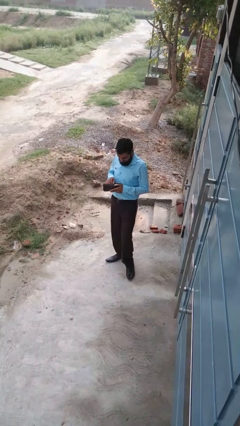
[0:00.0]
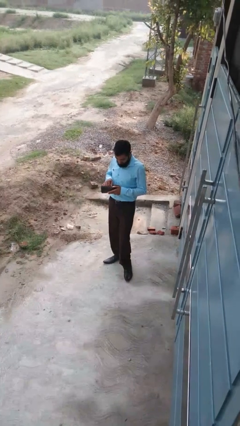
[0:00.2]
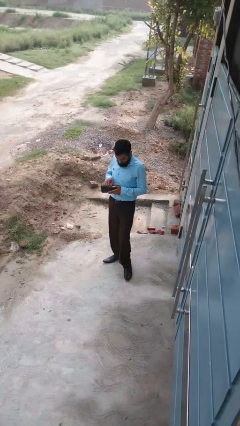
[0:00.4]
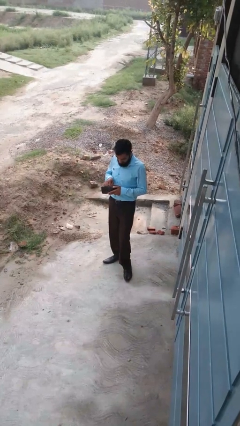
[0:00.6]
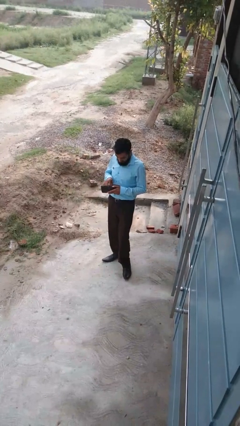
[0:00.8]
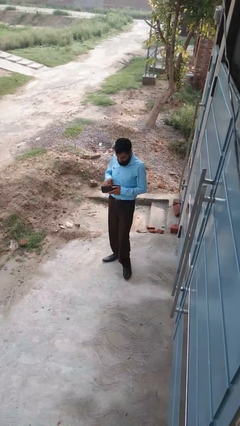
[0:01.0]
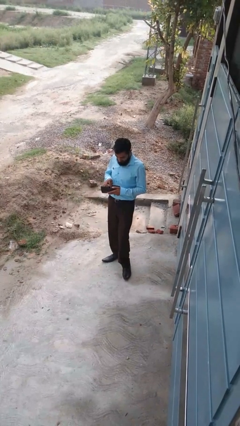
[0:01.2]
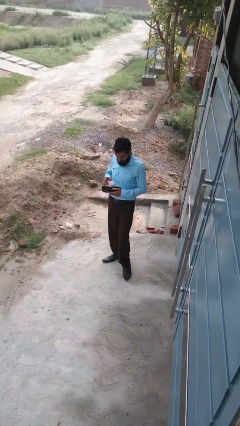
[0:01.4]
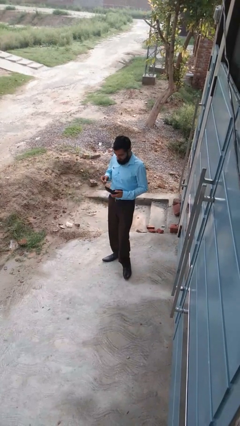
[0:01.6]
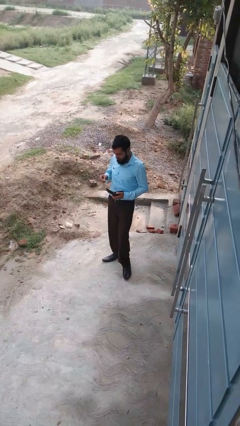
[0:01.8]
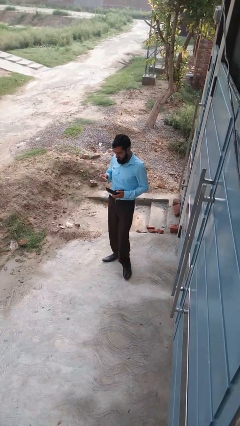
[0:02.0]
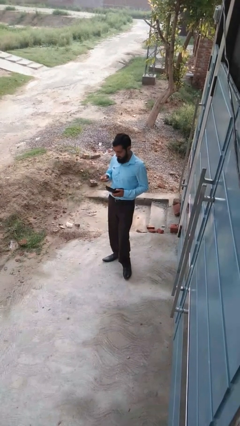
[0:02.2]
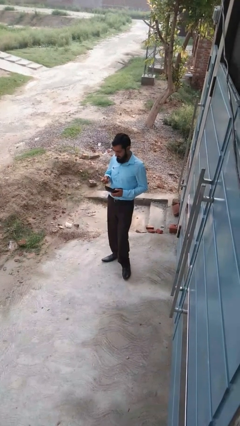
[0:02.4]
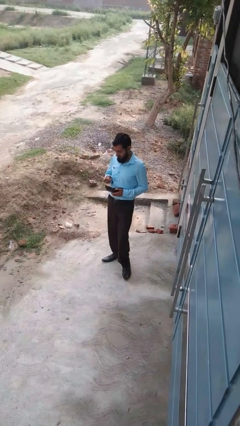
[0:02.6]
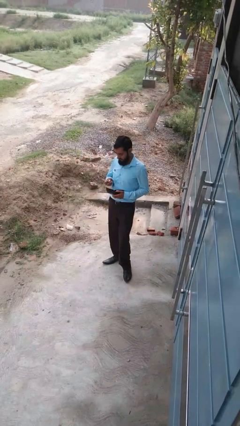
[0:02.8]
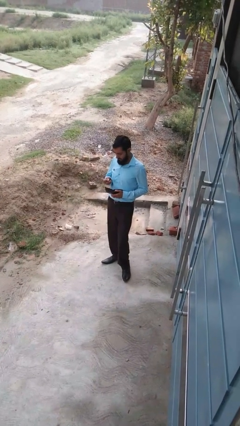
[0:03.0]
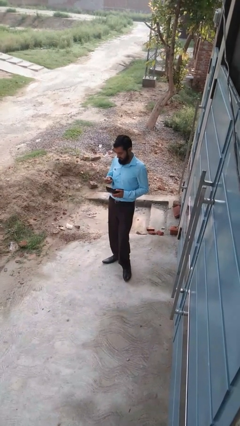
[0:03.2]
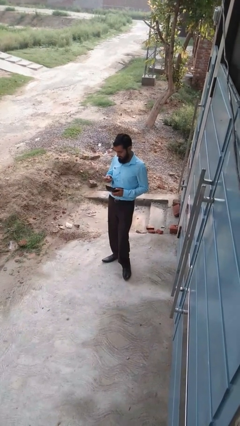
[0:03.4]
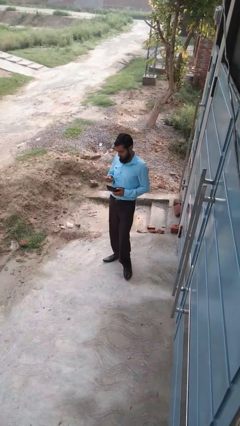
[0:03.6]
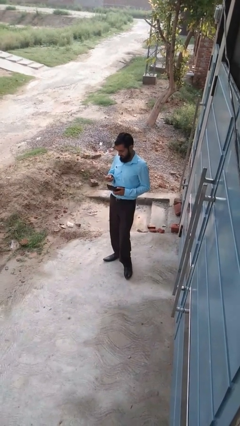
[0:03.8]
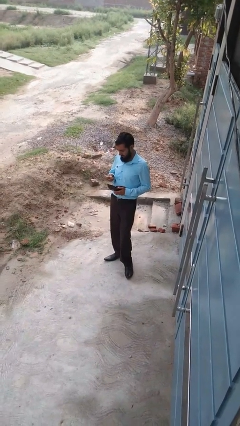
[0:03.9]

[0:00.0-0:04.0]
person takes object from purse

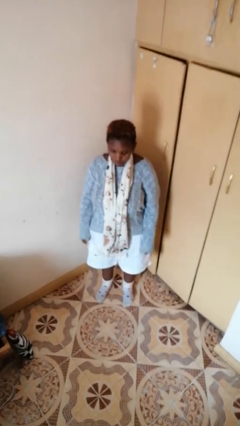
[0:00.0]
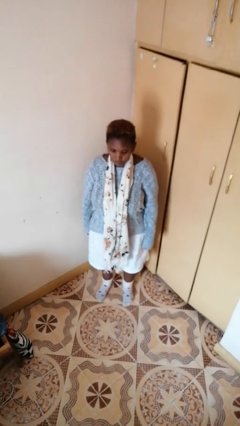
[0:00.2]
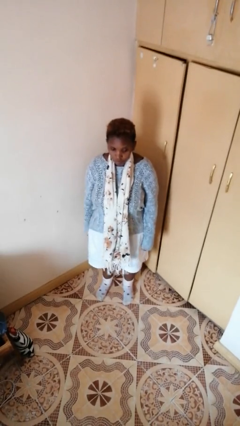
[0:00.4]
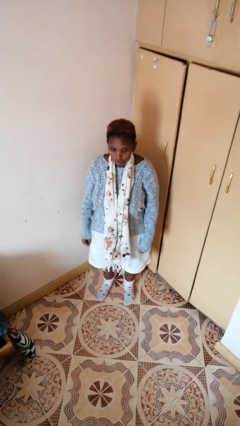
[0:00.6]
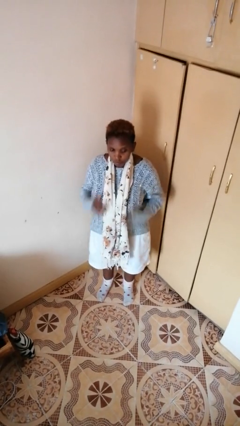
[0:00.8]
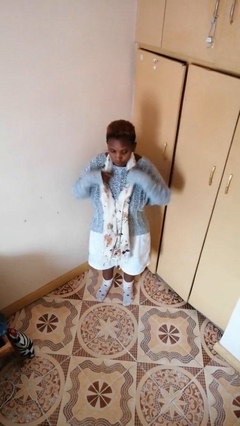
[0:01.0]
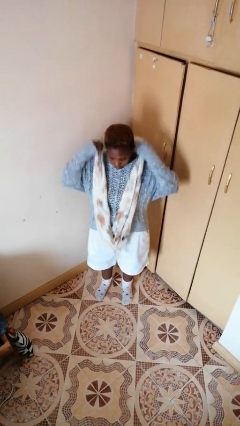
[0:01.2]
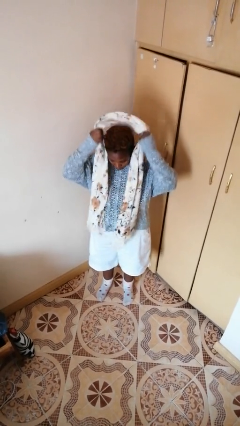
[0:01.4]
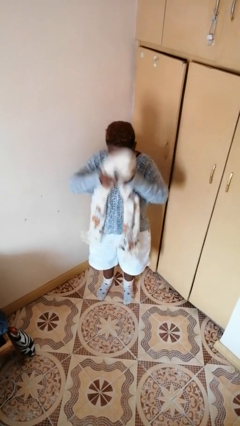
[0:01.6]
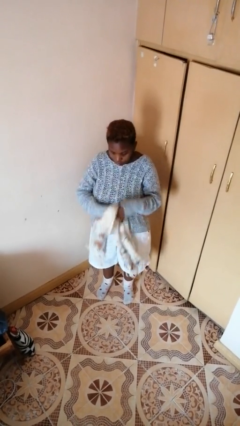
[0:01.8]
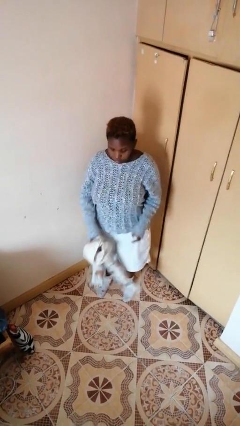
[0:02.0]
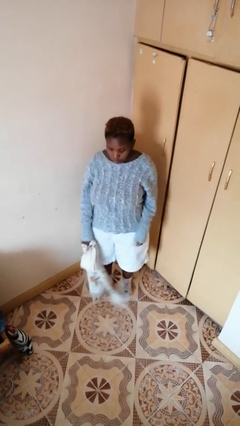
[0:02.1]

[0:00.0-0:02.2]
person takes off scarf

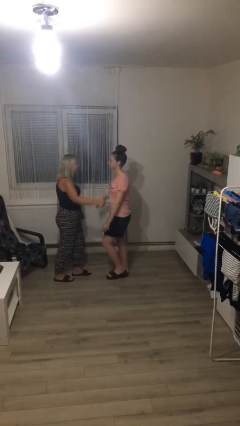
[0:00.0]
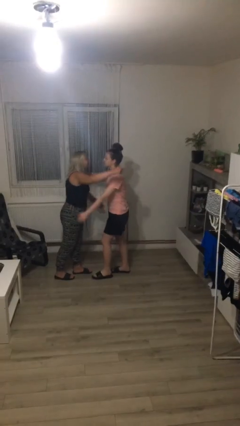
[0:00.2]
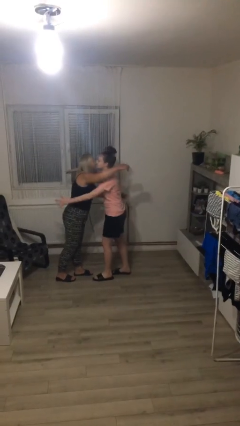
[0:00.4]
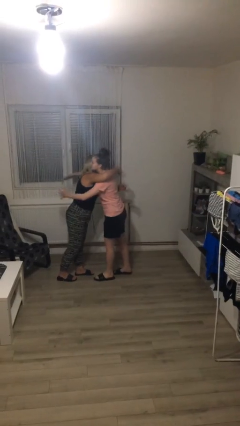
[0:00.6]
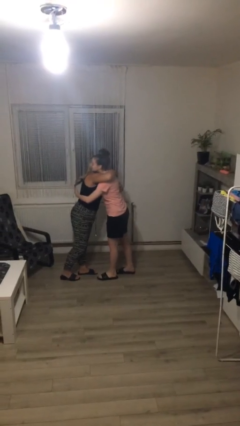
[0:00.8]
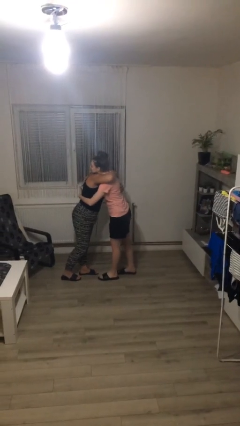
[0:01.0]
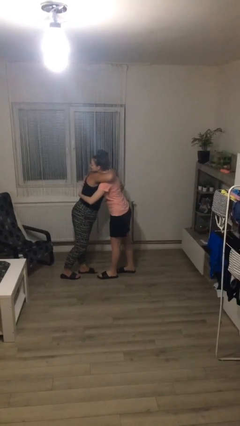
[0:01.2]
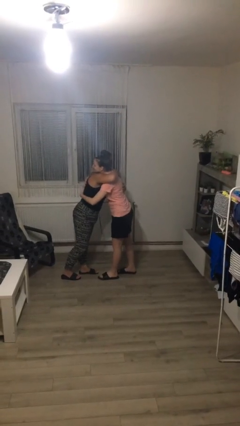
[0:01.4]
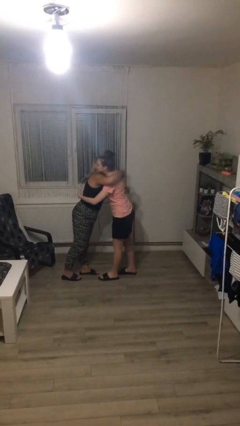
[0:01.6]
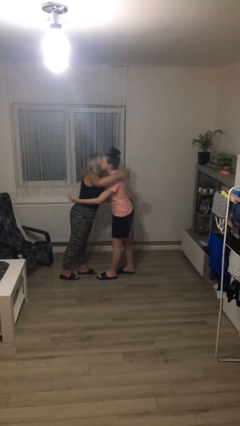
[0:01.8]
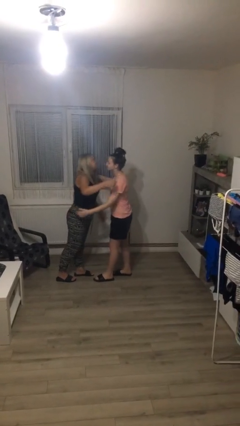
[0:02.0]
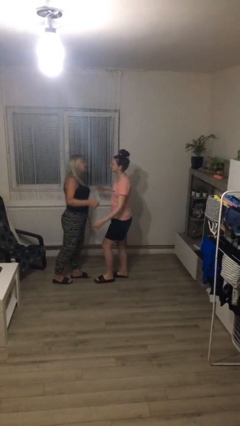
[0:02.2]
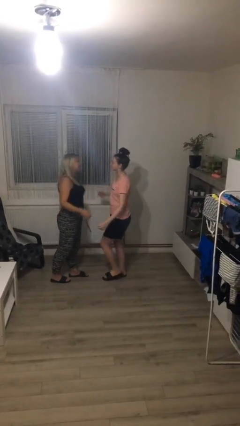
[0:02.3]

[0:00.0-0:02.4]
person embraces person

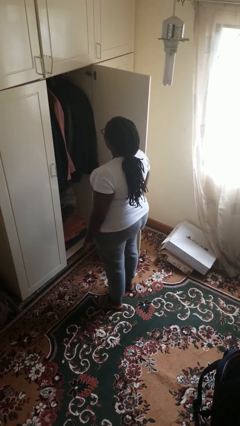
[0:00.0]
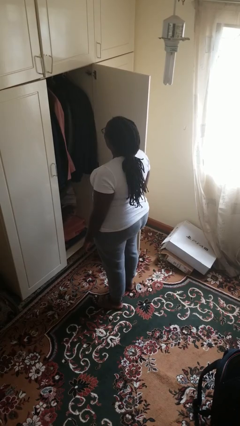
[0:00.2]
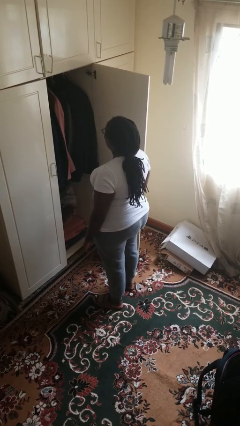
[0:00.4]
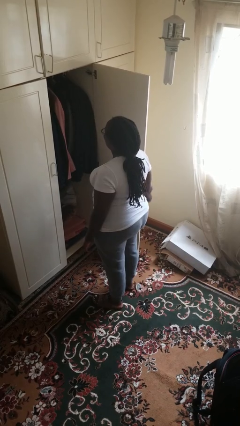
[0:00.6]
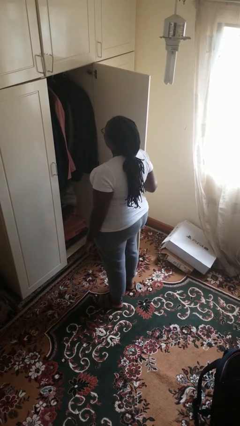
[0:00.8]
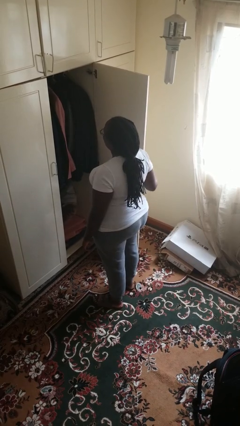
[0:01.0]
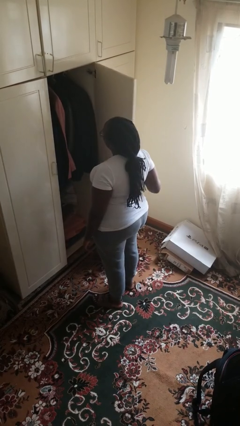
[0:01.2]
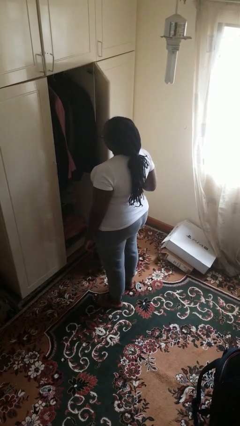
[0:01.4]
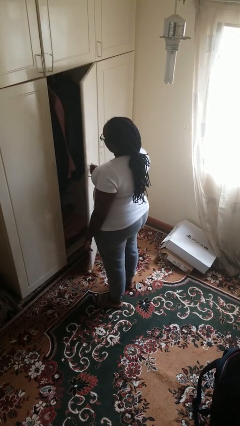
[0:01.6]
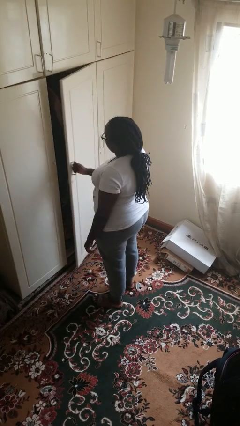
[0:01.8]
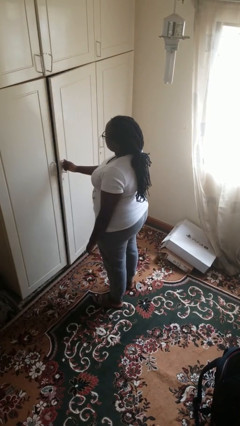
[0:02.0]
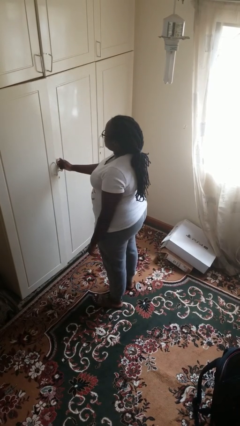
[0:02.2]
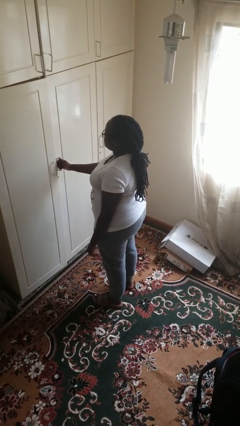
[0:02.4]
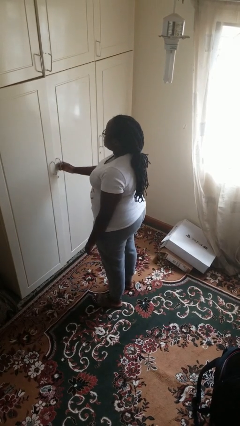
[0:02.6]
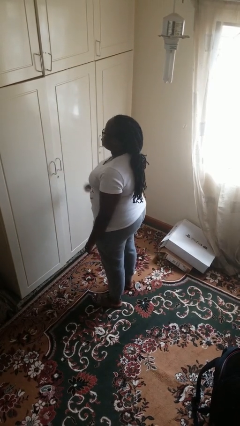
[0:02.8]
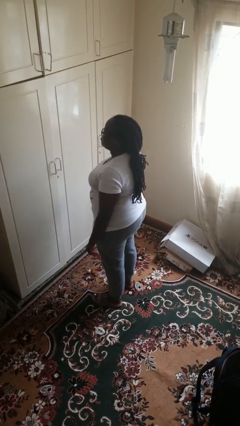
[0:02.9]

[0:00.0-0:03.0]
person closes closet door

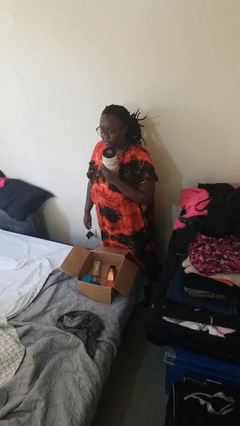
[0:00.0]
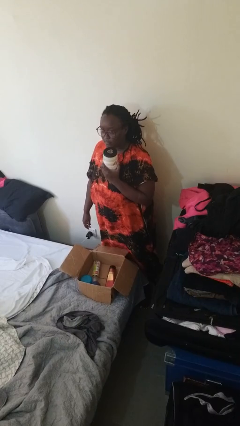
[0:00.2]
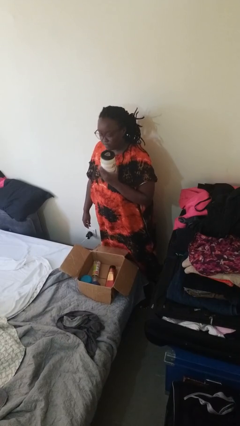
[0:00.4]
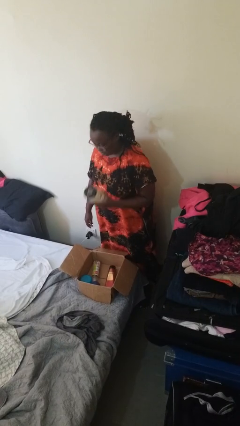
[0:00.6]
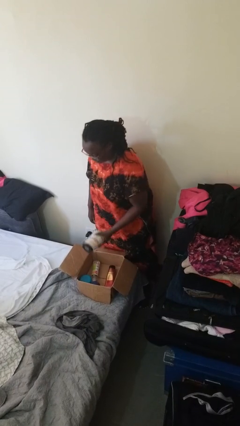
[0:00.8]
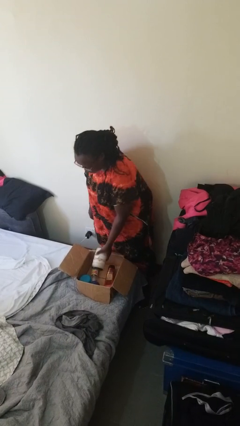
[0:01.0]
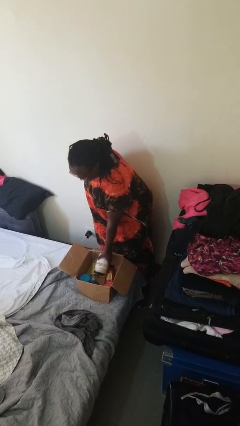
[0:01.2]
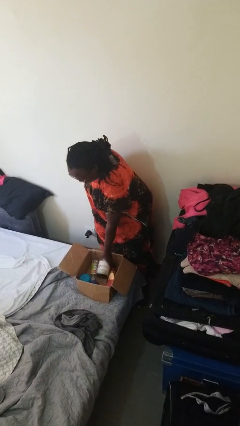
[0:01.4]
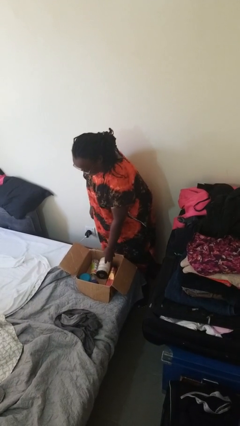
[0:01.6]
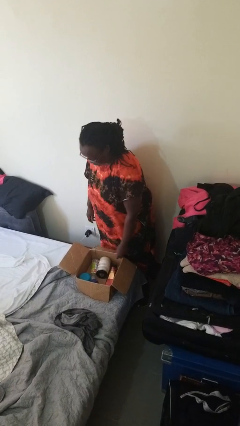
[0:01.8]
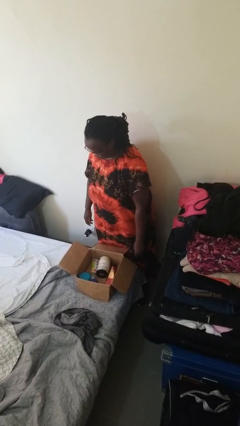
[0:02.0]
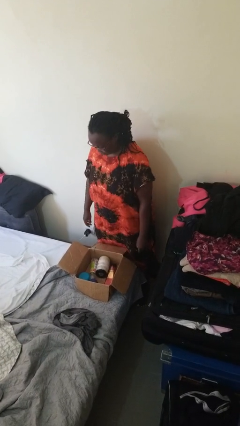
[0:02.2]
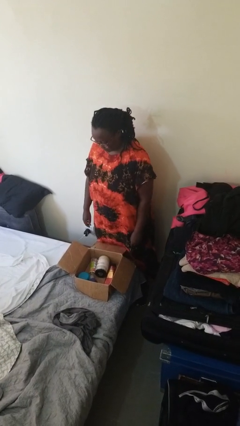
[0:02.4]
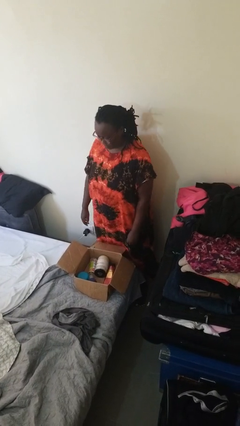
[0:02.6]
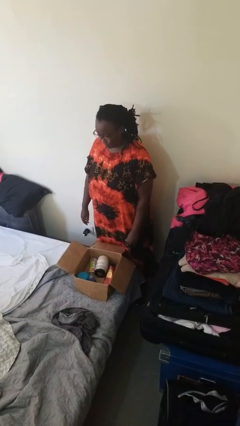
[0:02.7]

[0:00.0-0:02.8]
person puts object into box

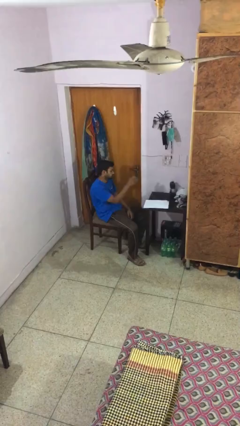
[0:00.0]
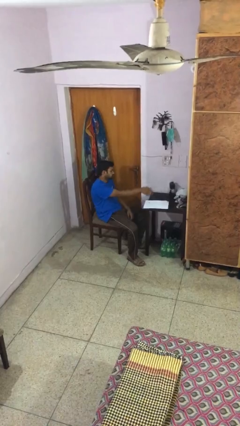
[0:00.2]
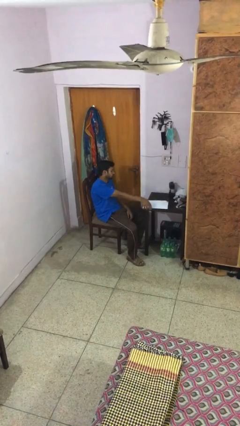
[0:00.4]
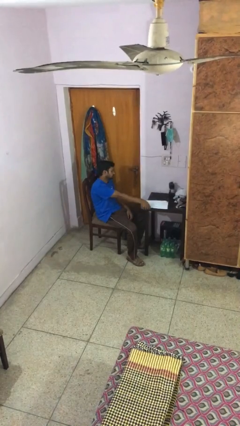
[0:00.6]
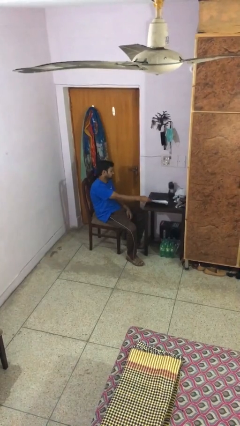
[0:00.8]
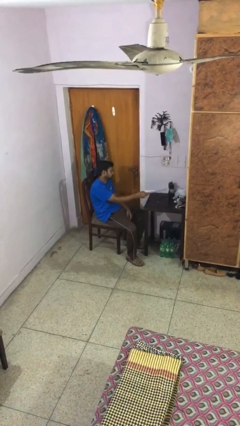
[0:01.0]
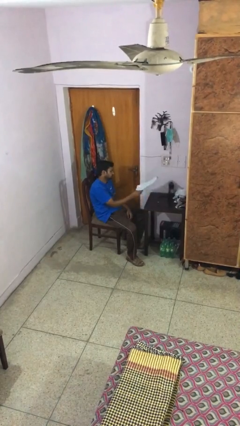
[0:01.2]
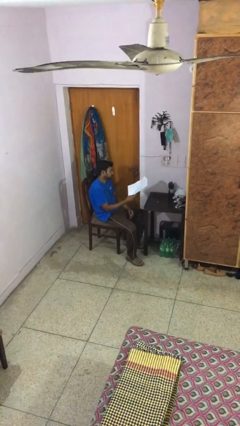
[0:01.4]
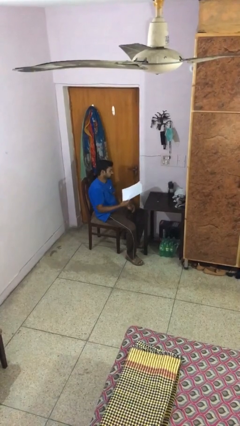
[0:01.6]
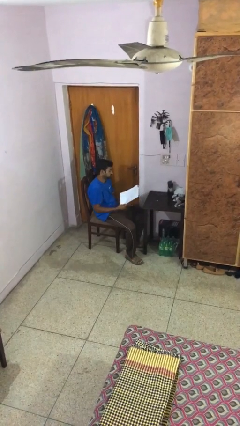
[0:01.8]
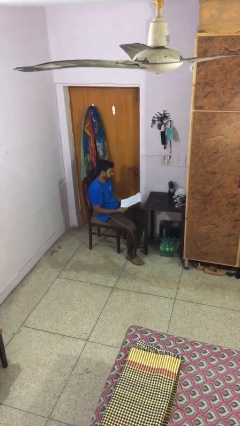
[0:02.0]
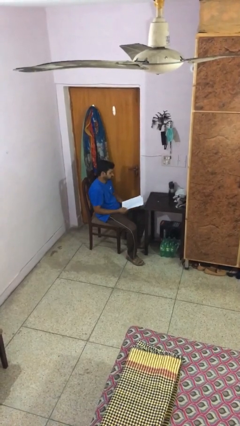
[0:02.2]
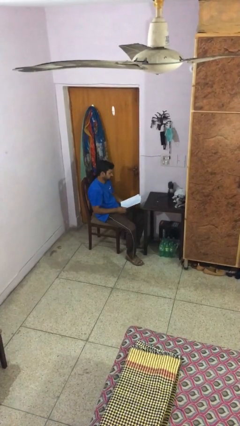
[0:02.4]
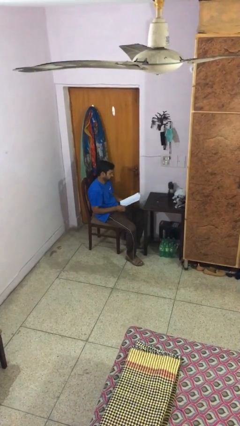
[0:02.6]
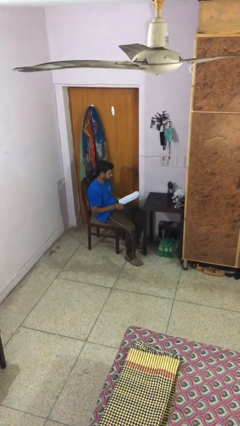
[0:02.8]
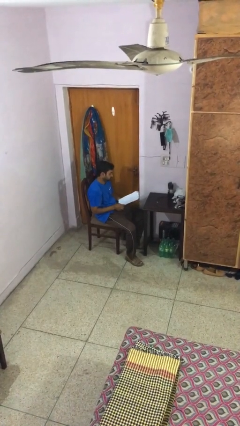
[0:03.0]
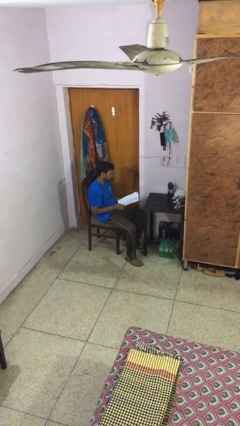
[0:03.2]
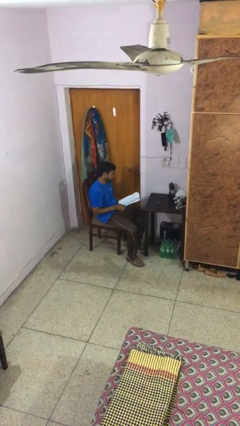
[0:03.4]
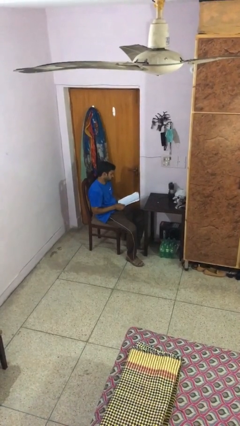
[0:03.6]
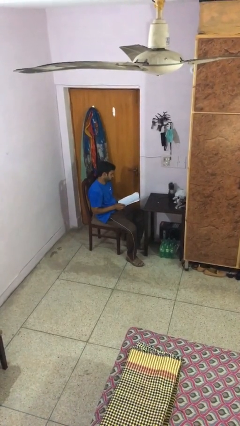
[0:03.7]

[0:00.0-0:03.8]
person picks up object from table
